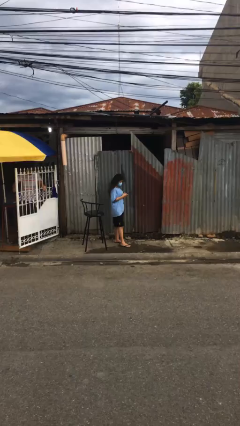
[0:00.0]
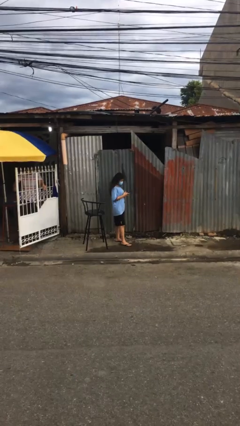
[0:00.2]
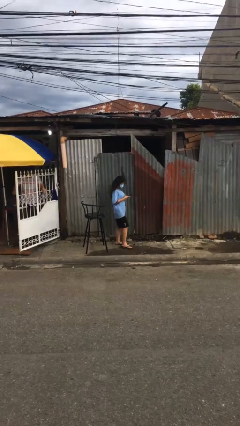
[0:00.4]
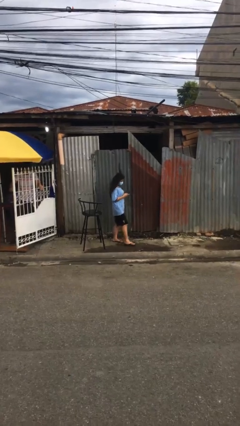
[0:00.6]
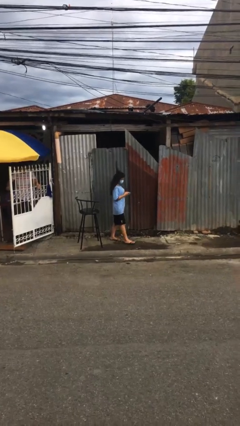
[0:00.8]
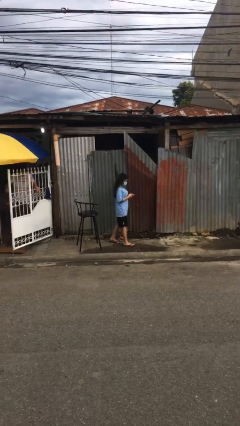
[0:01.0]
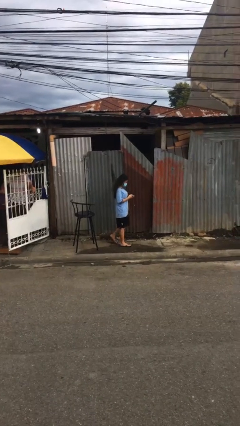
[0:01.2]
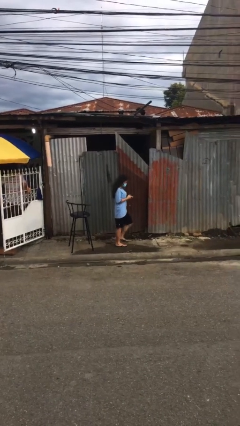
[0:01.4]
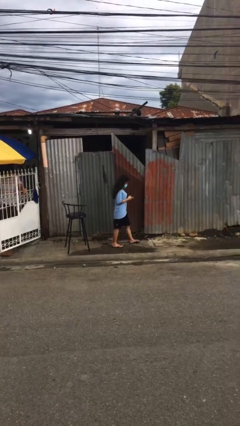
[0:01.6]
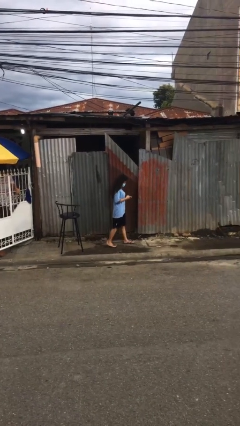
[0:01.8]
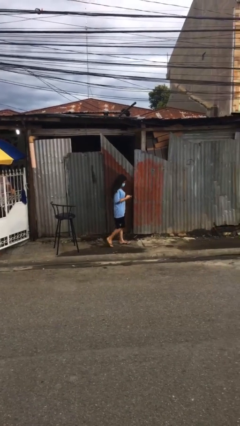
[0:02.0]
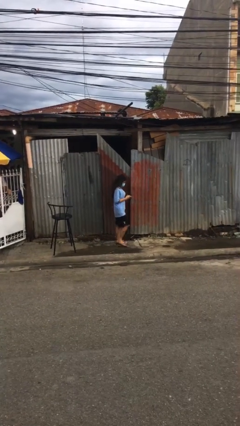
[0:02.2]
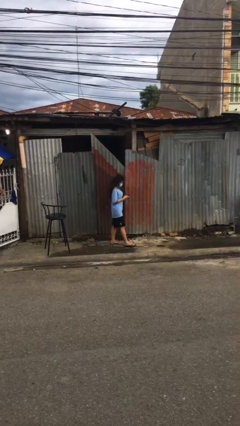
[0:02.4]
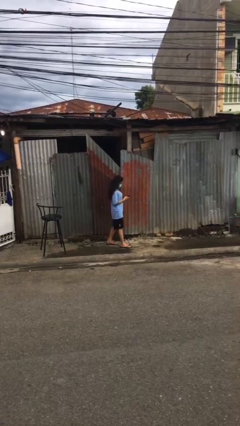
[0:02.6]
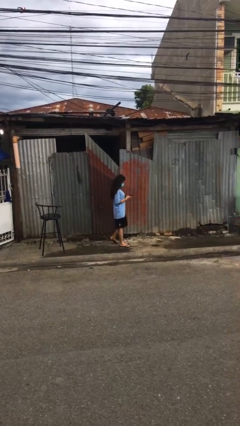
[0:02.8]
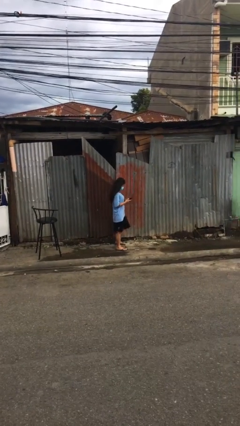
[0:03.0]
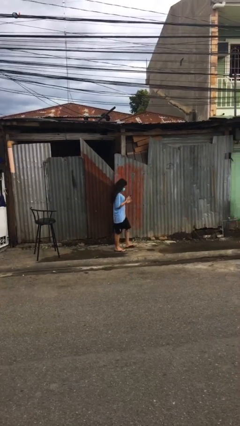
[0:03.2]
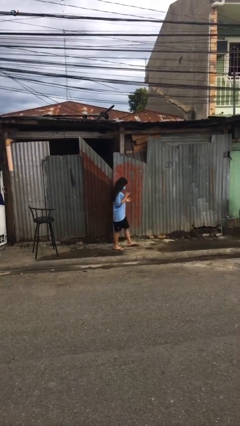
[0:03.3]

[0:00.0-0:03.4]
person texts on phone

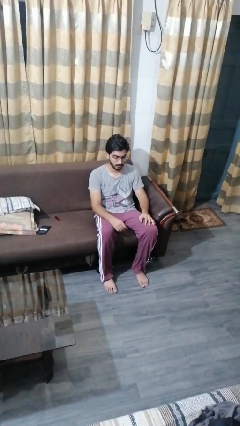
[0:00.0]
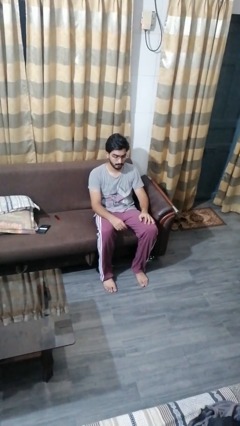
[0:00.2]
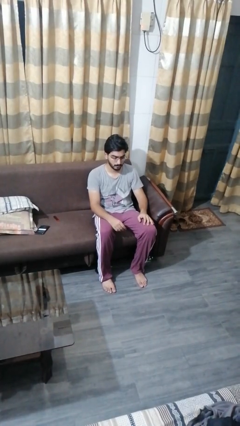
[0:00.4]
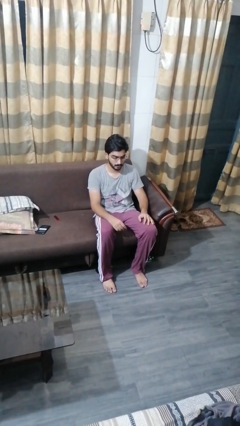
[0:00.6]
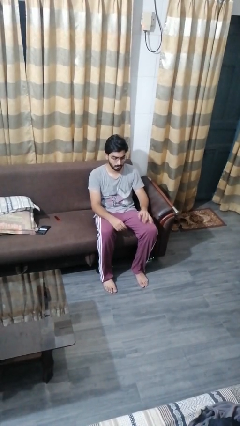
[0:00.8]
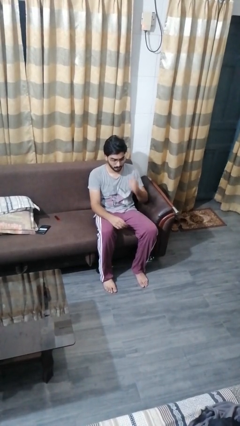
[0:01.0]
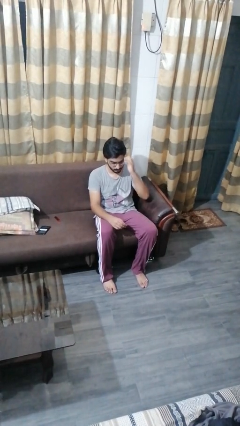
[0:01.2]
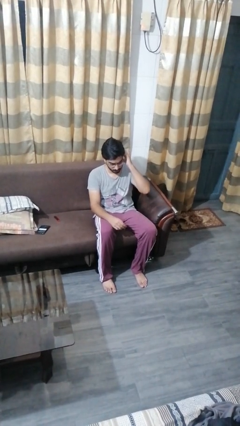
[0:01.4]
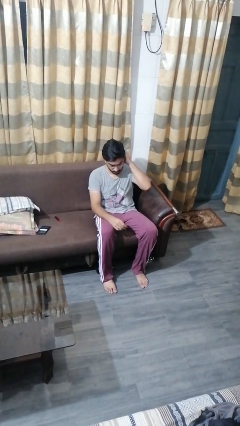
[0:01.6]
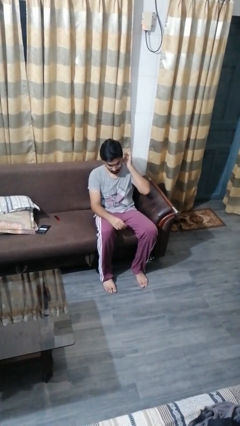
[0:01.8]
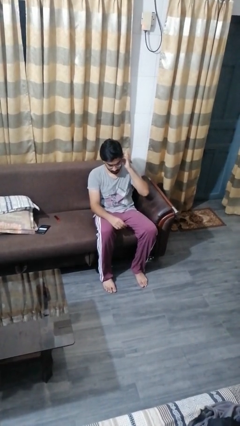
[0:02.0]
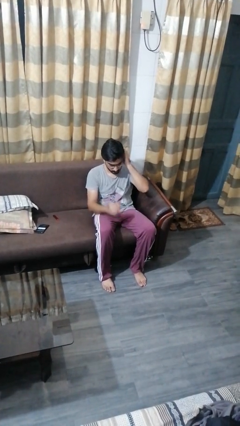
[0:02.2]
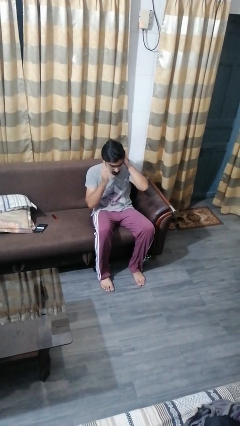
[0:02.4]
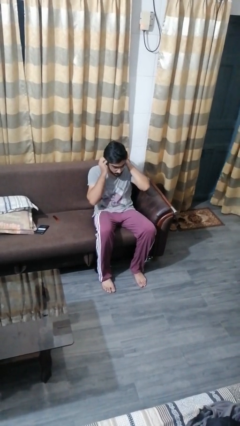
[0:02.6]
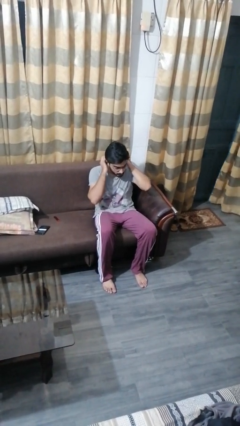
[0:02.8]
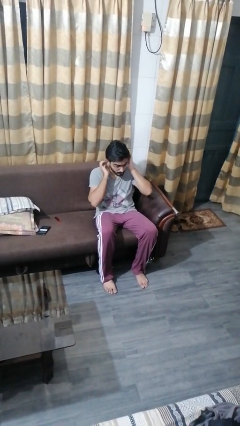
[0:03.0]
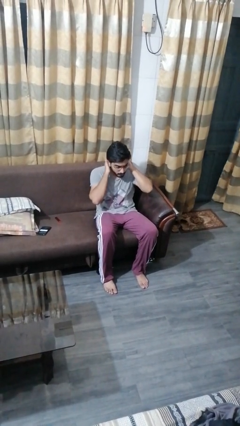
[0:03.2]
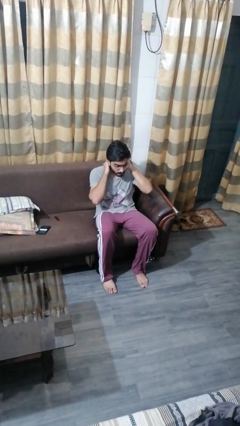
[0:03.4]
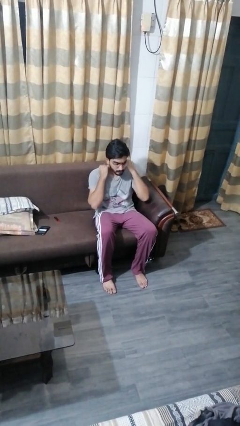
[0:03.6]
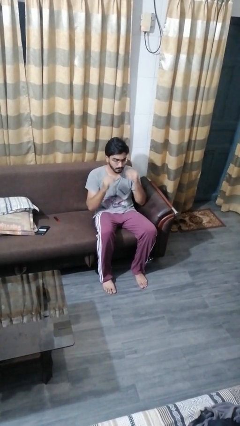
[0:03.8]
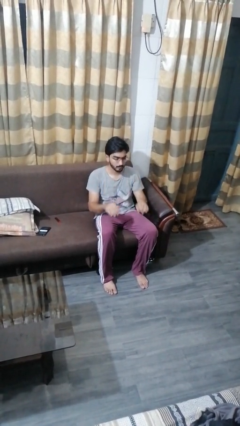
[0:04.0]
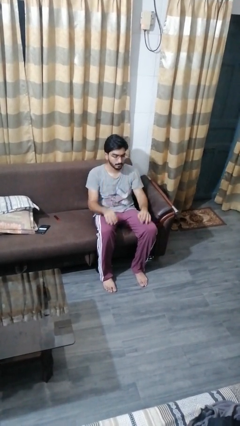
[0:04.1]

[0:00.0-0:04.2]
person strokes hair

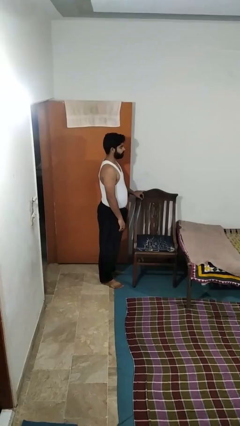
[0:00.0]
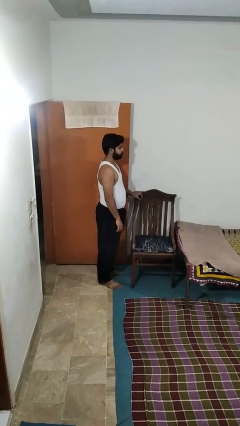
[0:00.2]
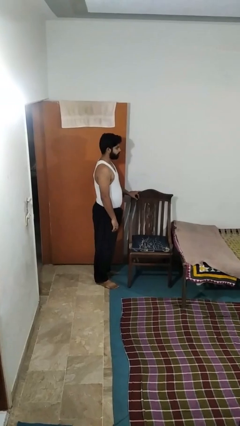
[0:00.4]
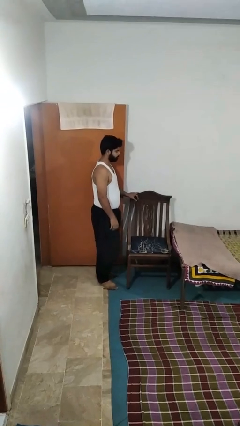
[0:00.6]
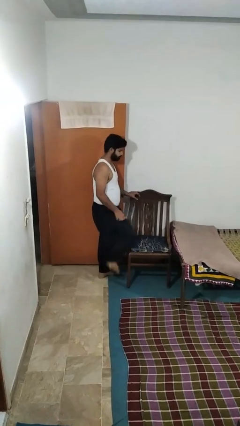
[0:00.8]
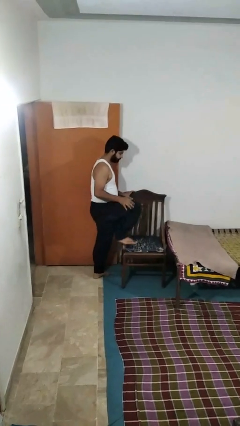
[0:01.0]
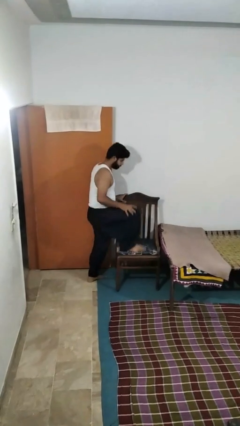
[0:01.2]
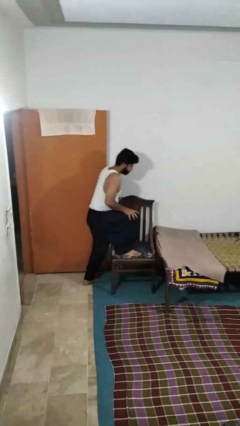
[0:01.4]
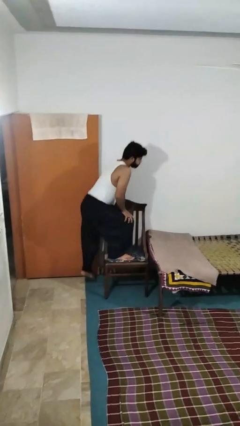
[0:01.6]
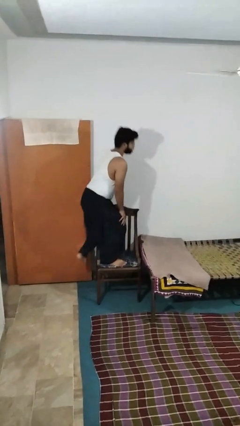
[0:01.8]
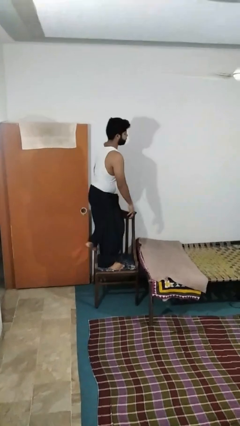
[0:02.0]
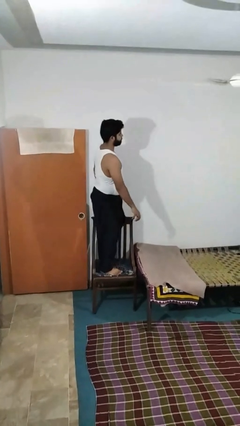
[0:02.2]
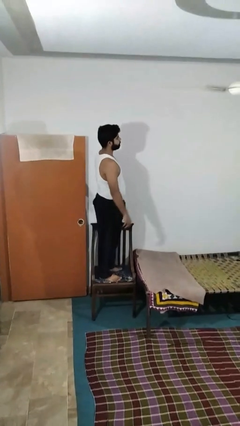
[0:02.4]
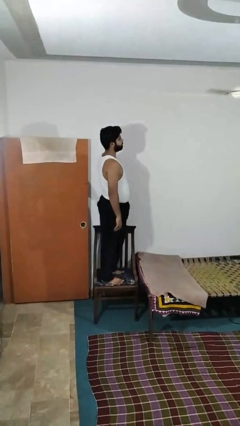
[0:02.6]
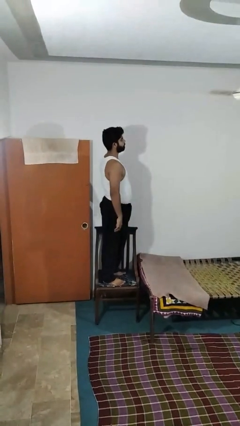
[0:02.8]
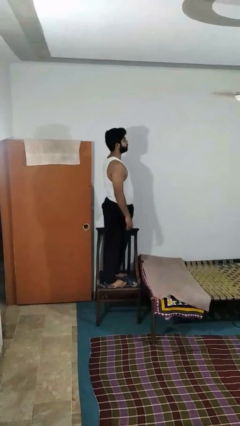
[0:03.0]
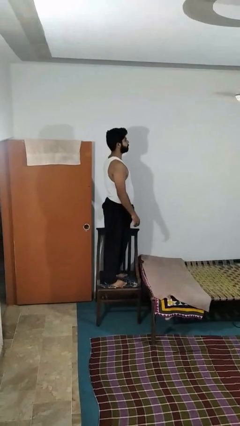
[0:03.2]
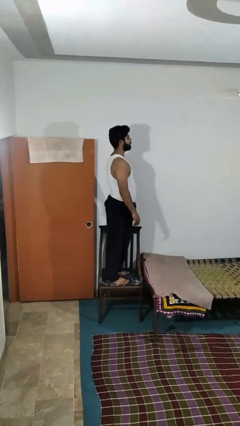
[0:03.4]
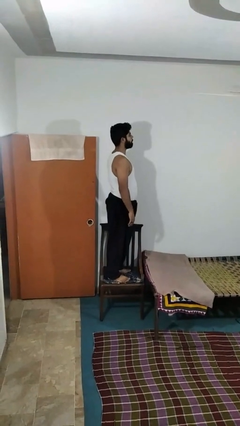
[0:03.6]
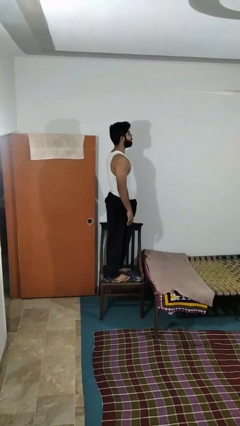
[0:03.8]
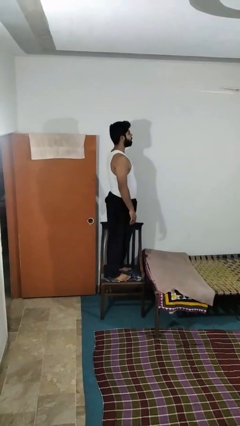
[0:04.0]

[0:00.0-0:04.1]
person climbs on chair

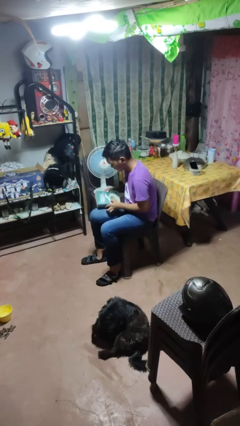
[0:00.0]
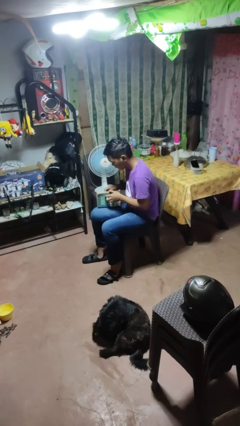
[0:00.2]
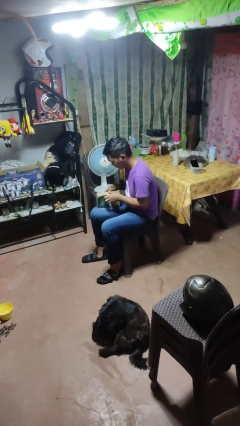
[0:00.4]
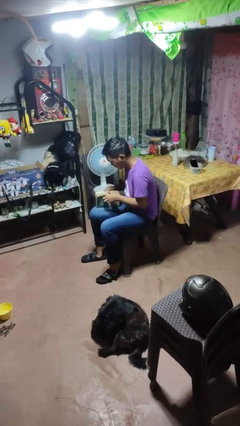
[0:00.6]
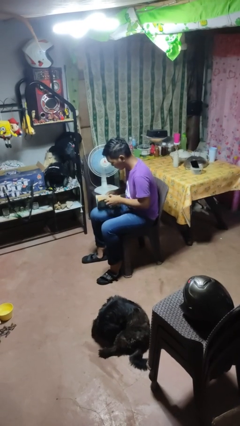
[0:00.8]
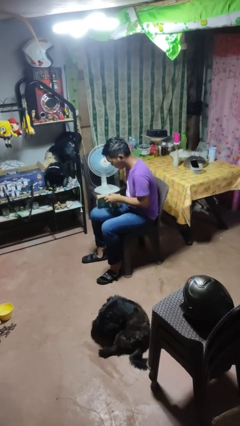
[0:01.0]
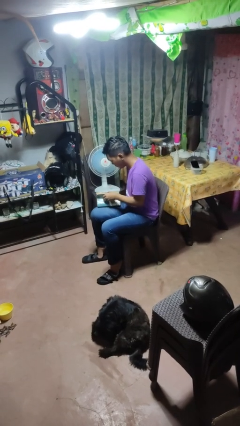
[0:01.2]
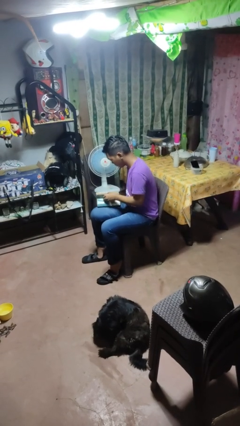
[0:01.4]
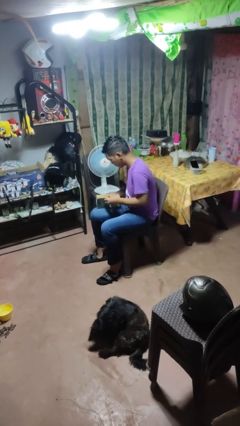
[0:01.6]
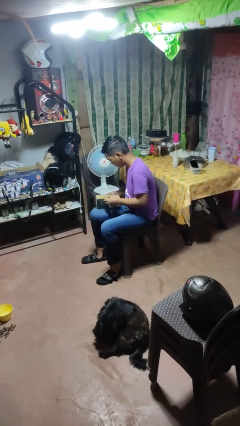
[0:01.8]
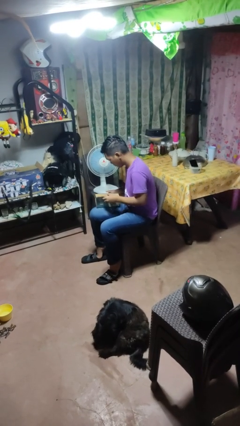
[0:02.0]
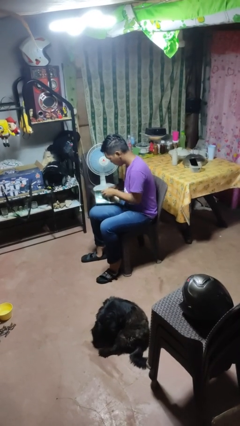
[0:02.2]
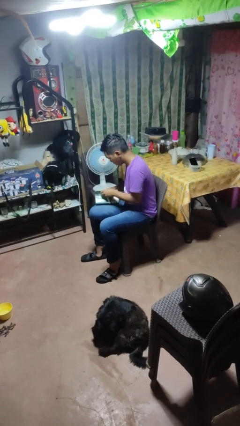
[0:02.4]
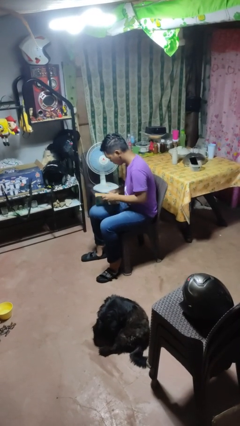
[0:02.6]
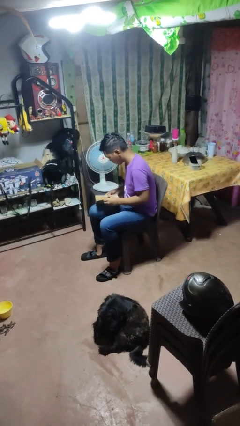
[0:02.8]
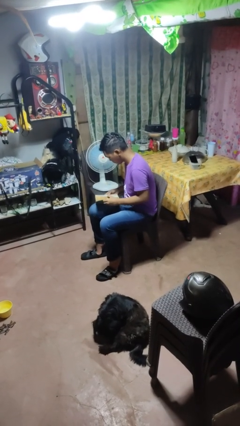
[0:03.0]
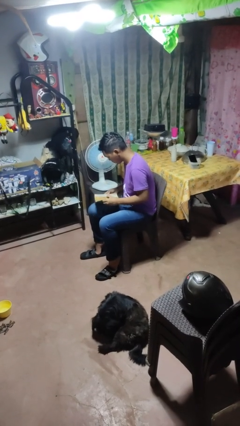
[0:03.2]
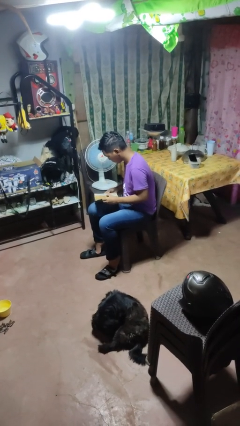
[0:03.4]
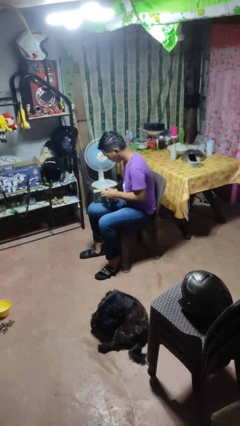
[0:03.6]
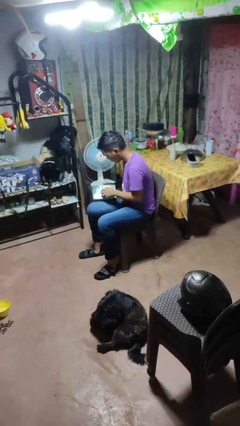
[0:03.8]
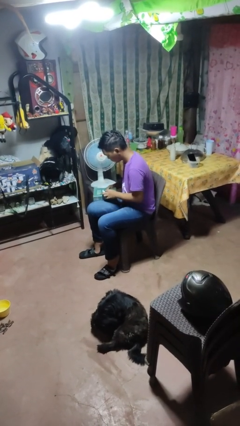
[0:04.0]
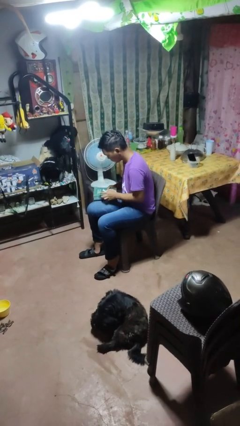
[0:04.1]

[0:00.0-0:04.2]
person reads book

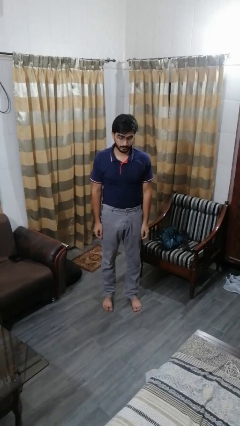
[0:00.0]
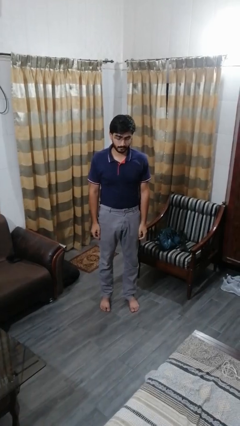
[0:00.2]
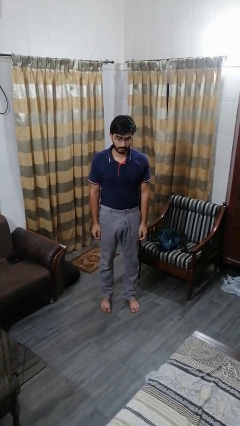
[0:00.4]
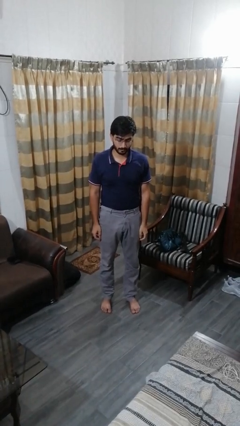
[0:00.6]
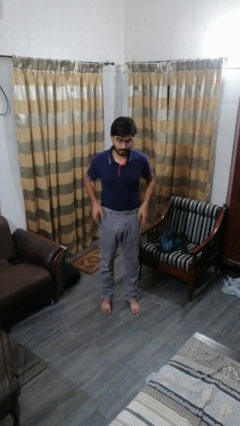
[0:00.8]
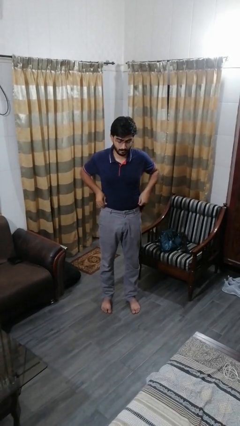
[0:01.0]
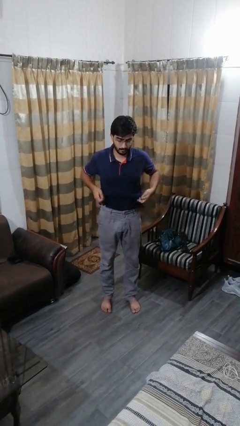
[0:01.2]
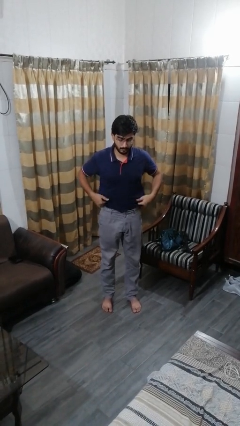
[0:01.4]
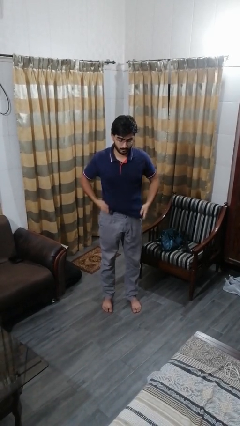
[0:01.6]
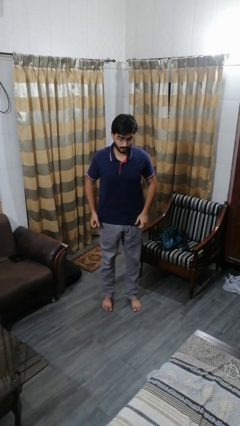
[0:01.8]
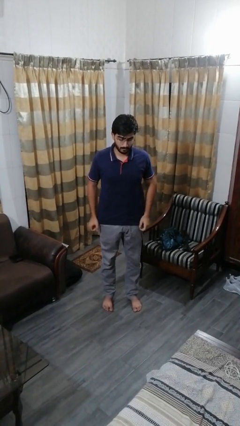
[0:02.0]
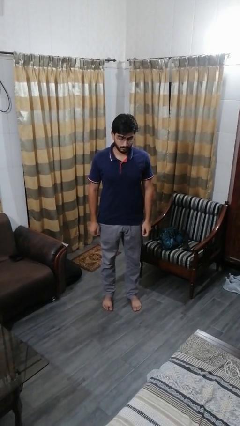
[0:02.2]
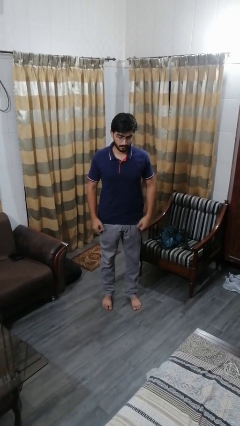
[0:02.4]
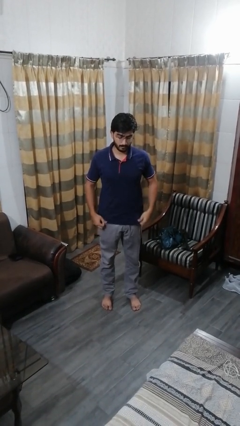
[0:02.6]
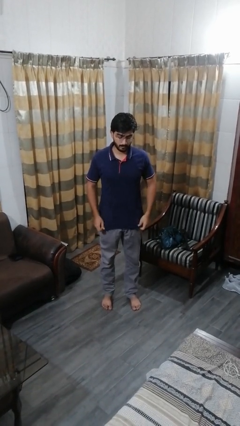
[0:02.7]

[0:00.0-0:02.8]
person untucks shirt
